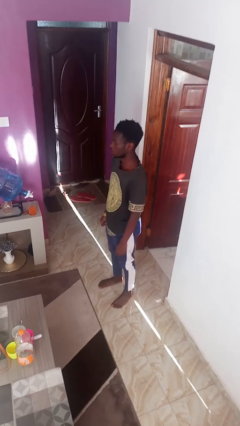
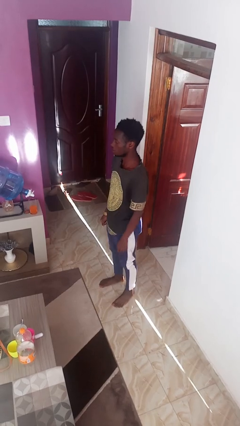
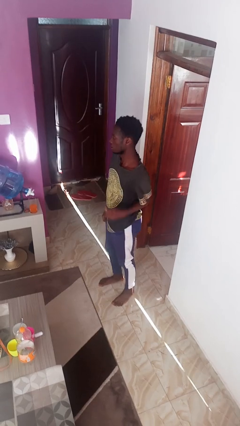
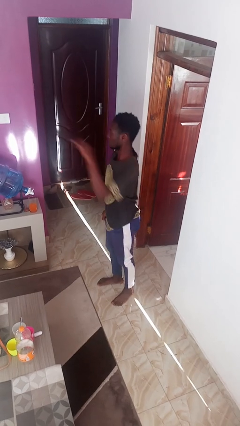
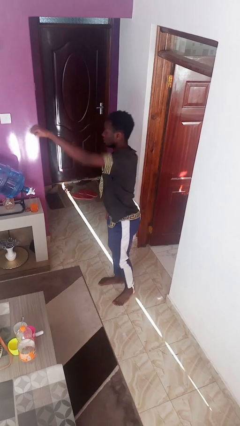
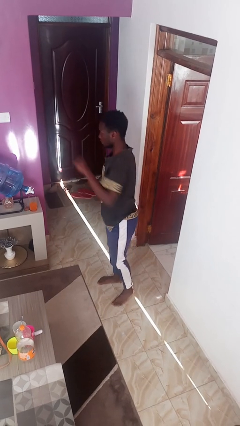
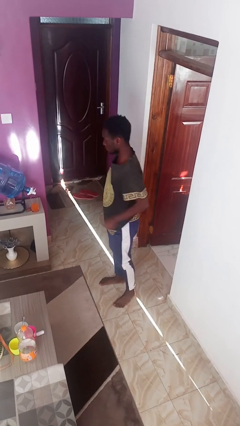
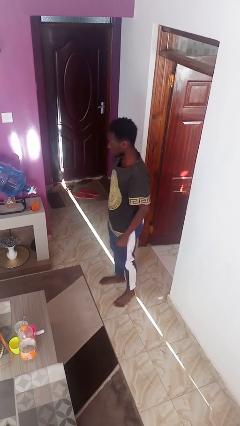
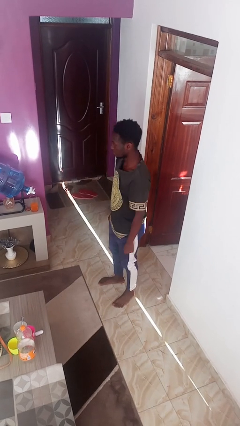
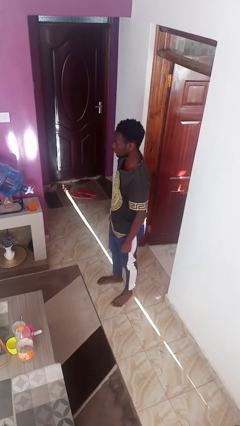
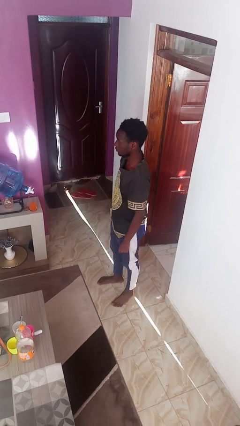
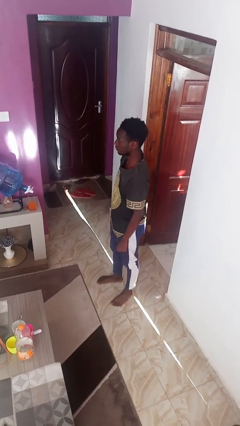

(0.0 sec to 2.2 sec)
person punches

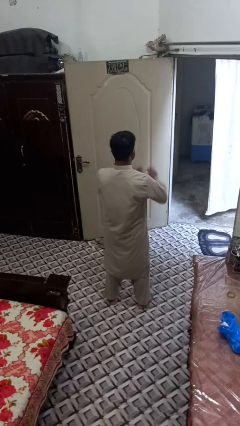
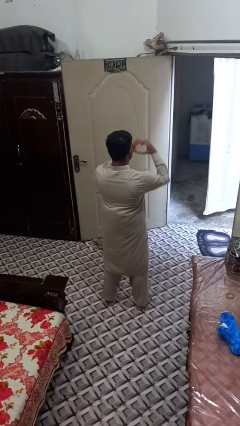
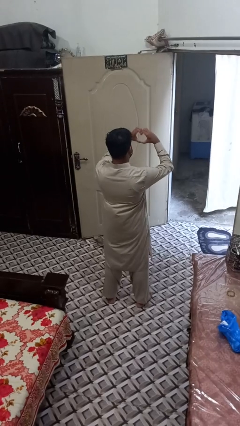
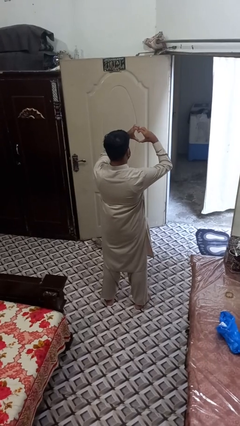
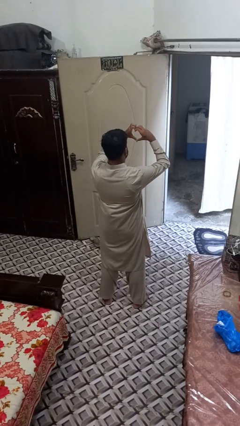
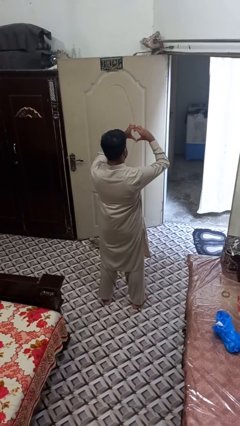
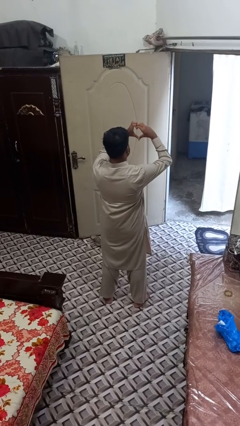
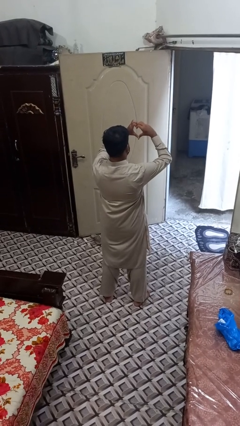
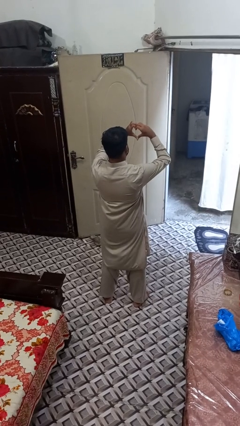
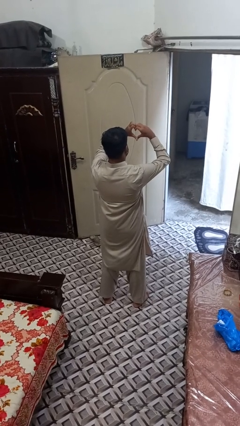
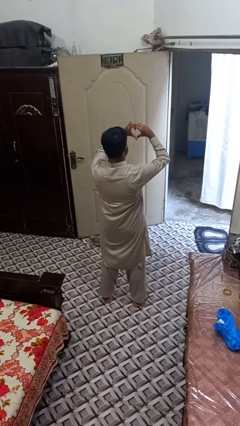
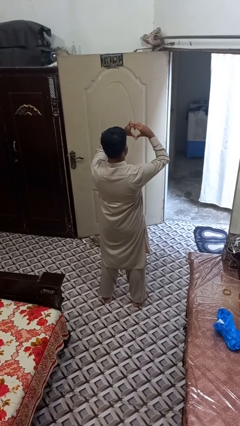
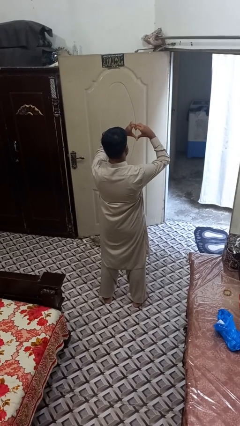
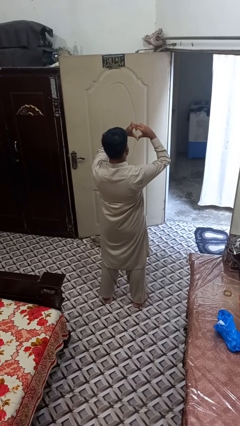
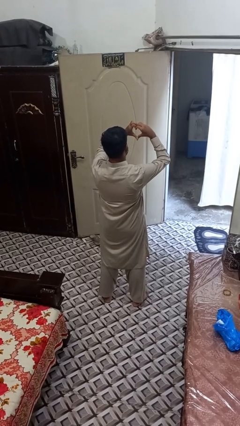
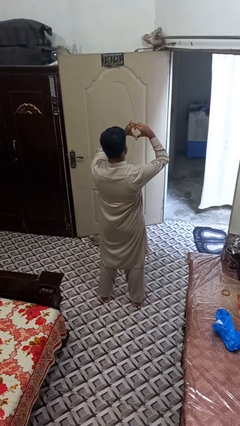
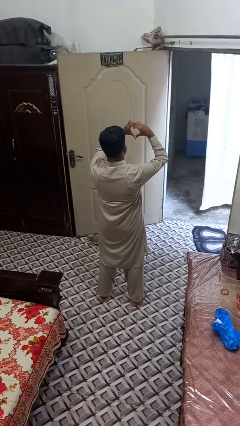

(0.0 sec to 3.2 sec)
person gestures heart

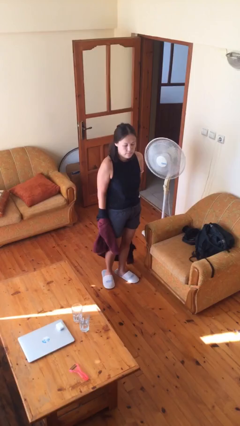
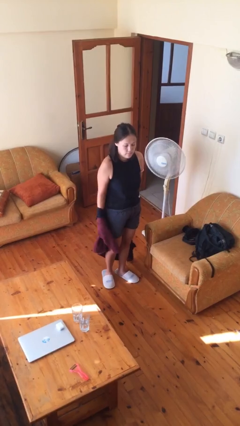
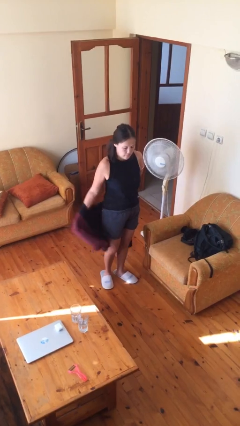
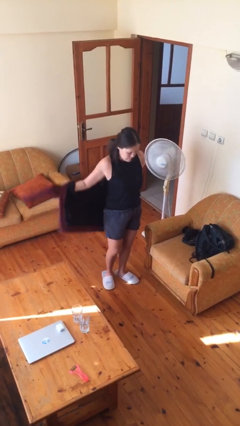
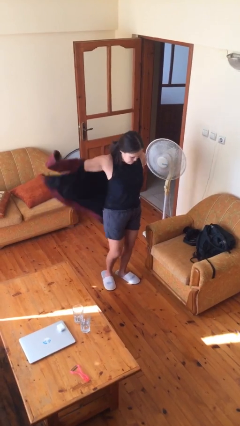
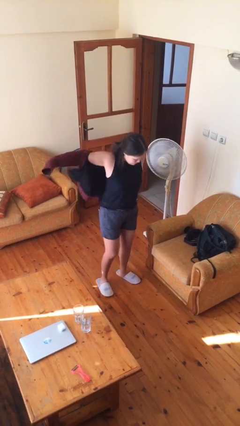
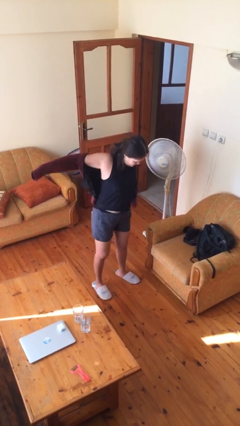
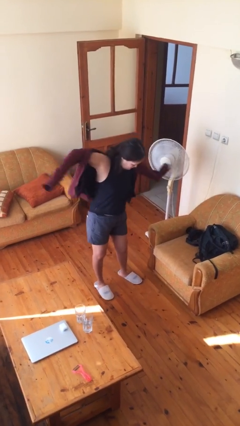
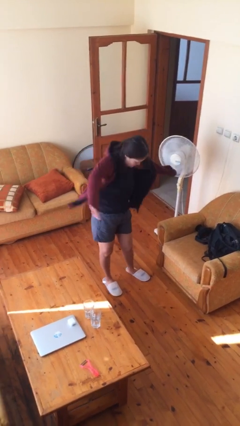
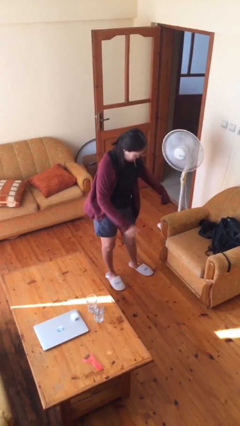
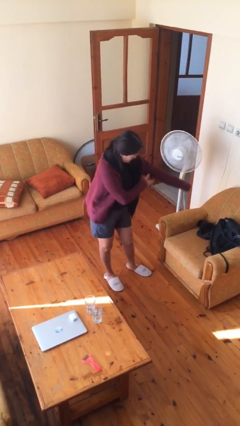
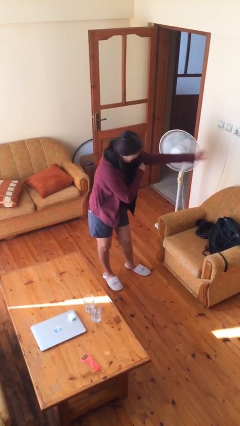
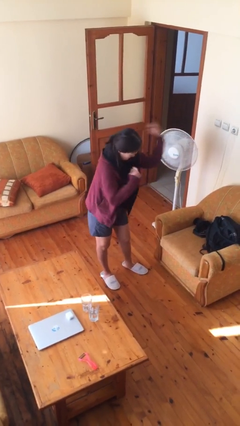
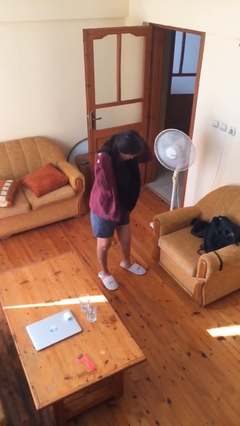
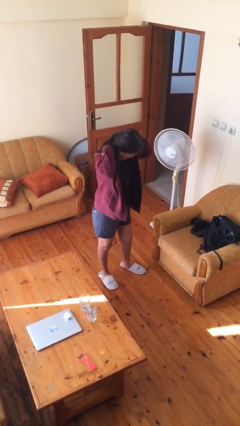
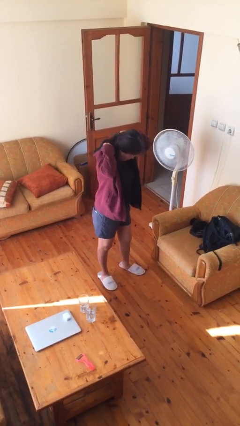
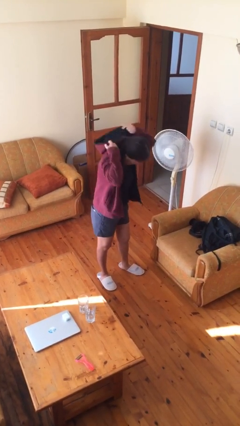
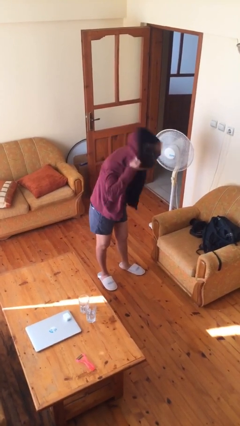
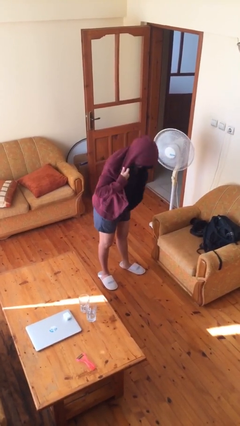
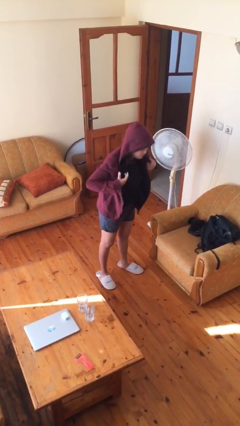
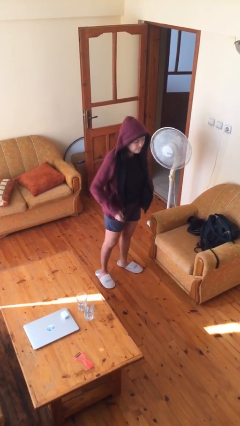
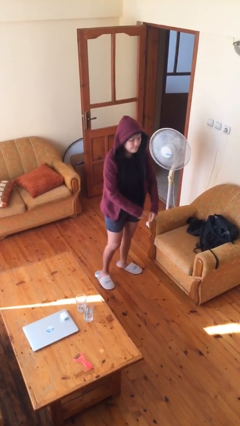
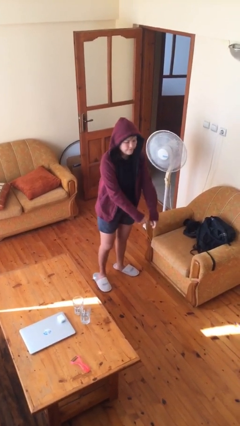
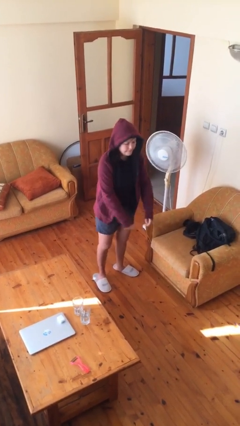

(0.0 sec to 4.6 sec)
person puts on hoodie

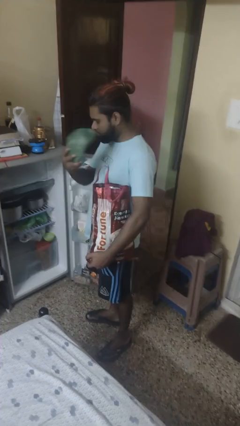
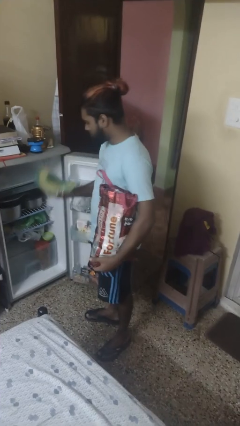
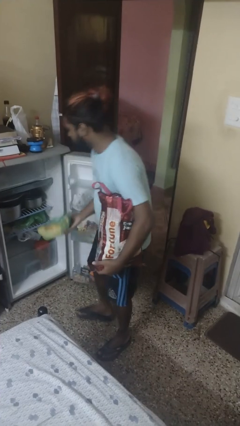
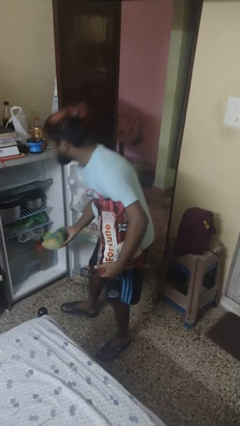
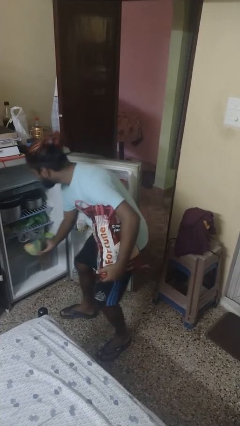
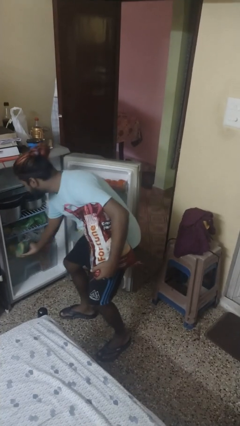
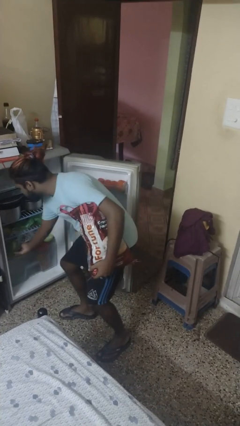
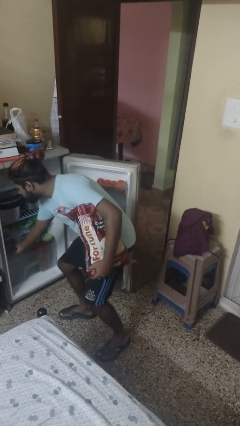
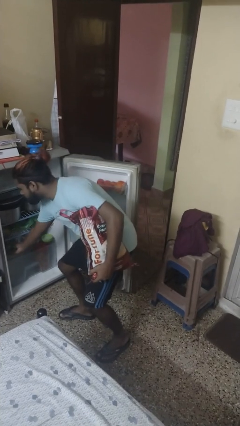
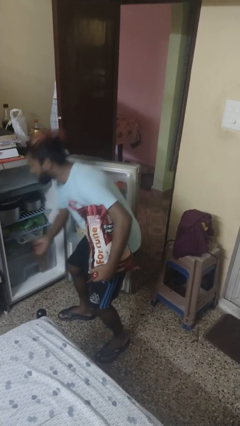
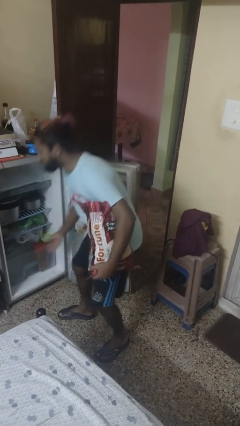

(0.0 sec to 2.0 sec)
person loads groceries into refrigerator

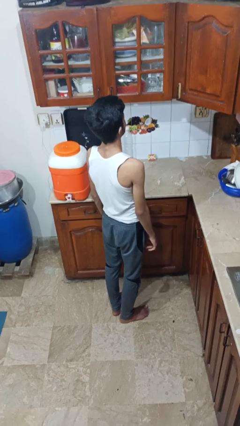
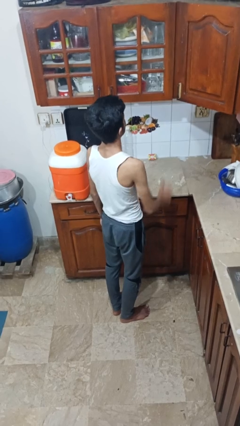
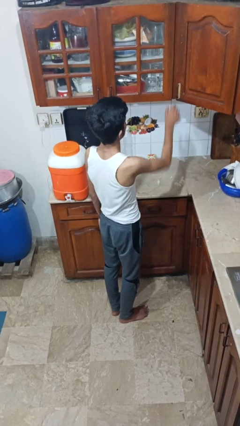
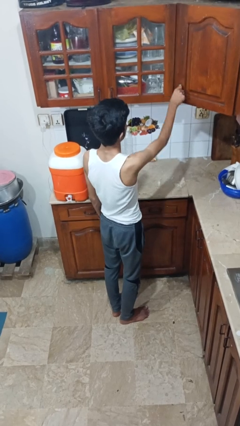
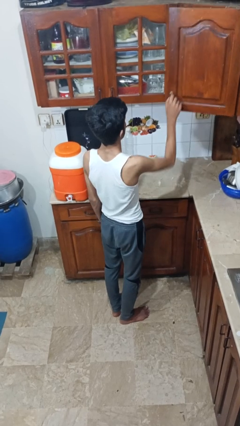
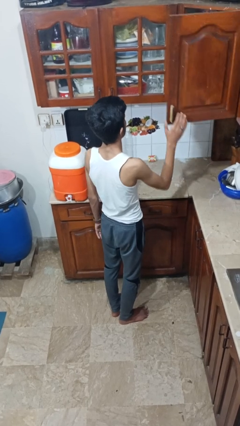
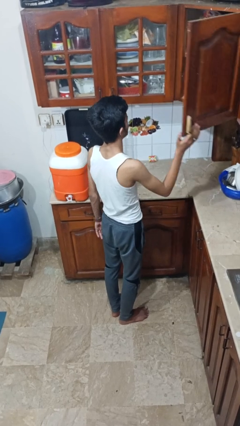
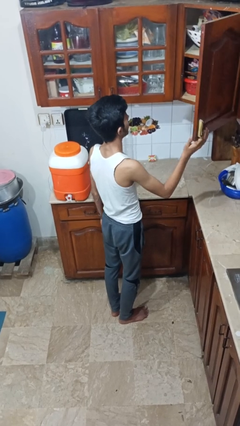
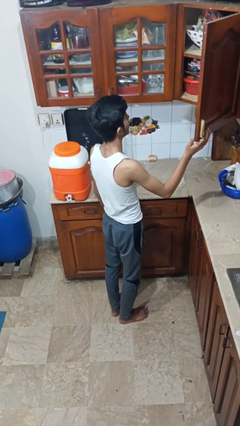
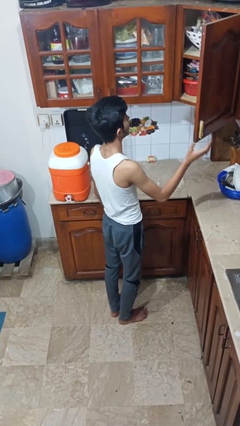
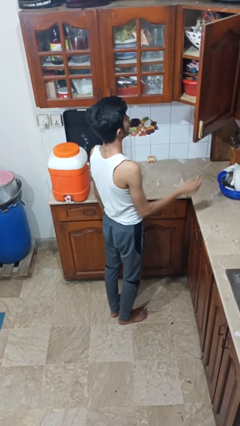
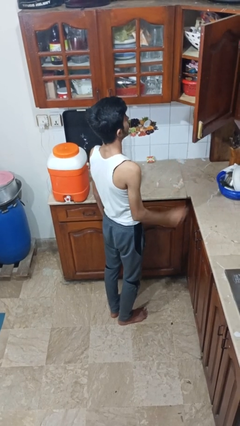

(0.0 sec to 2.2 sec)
person closes cabinet

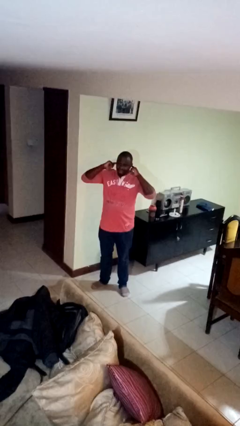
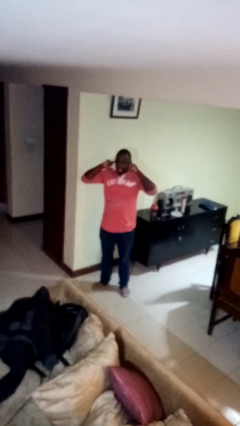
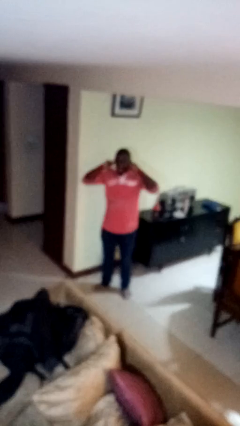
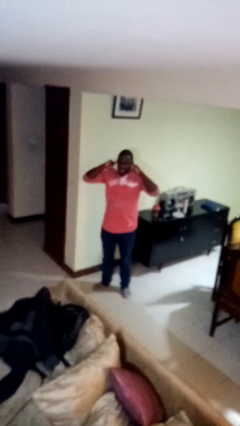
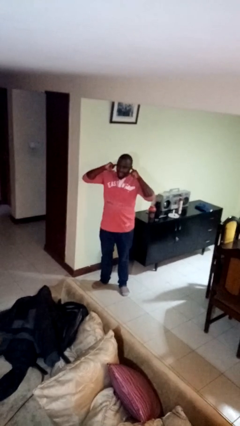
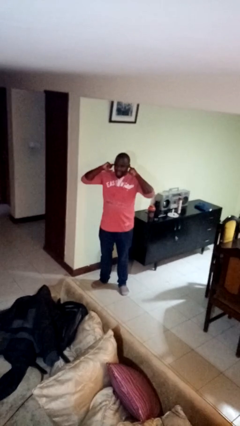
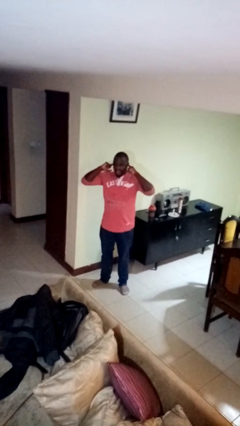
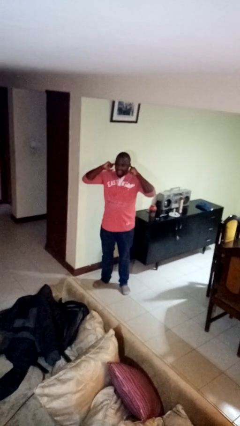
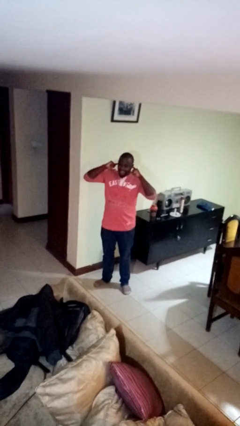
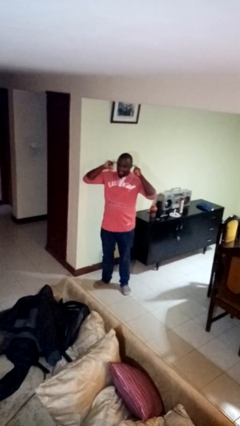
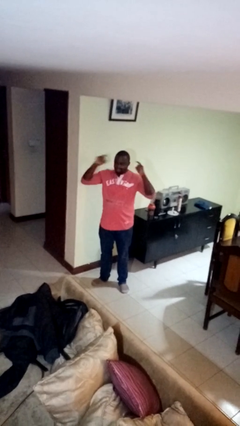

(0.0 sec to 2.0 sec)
person puts fingers in ear

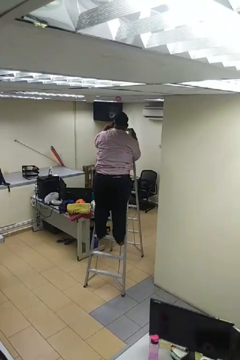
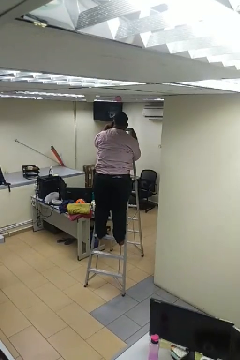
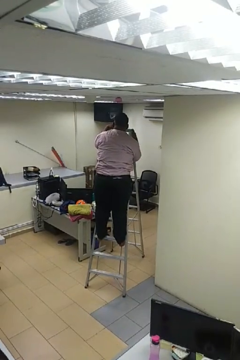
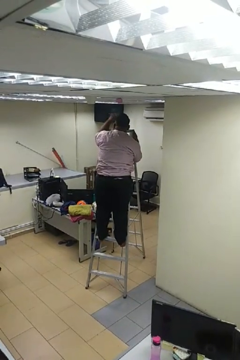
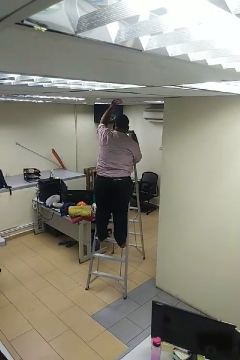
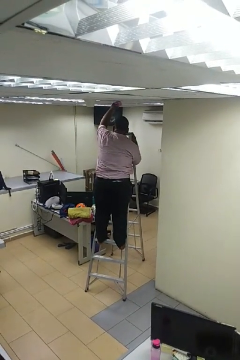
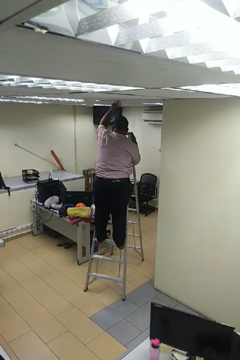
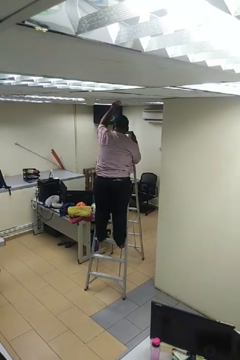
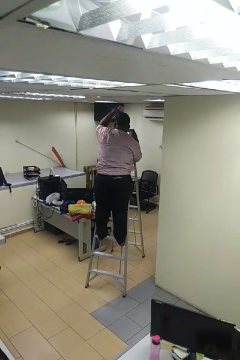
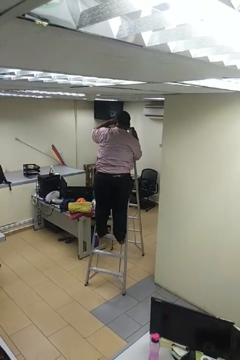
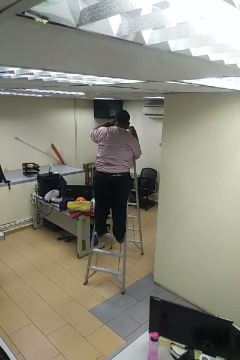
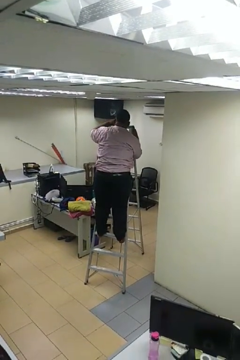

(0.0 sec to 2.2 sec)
person takes down smoke detector
